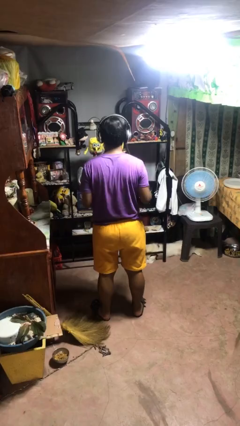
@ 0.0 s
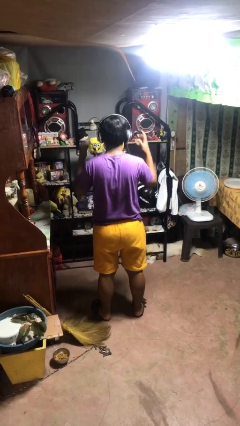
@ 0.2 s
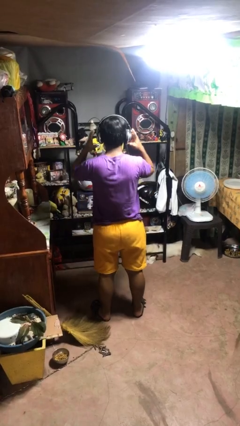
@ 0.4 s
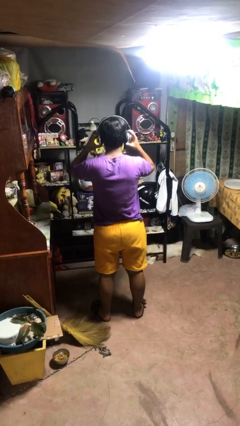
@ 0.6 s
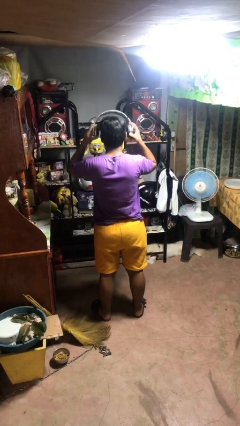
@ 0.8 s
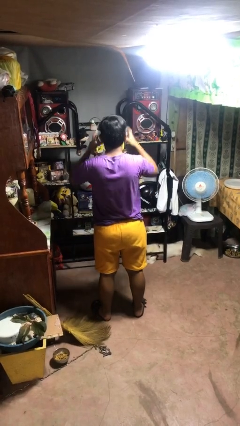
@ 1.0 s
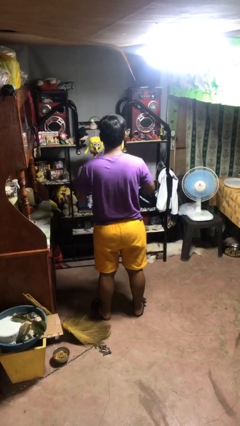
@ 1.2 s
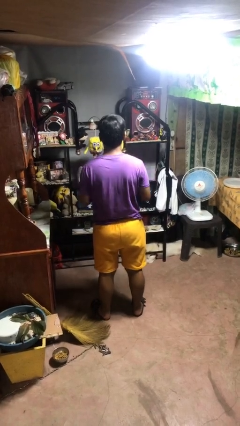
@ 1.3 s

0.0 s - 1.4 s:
person takes off headphones

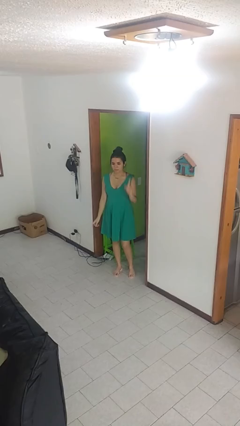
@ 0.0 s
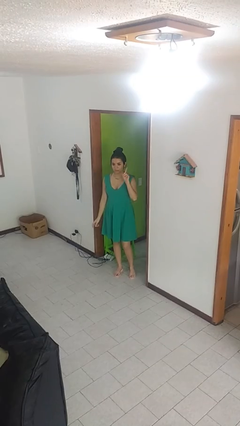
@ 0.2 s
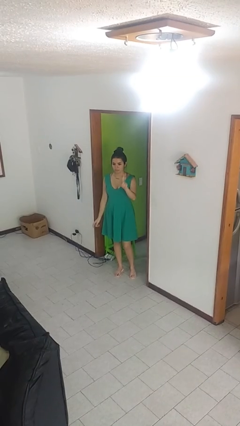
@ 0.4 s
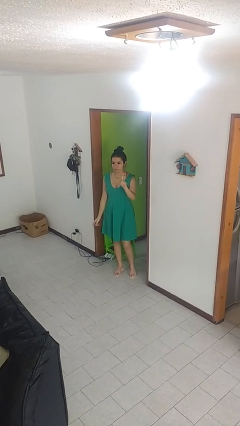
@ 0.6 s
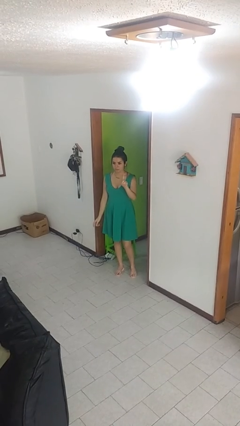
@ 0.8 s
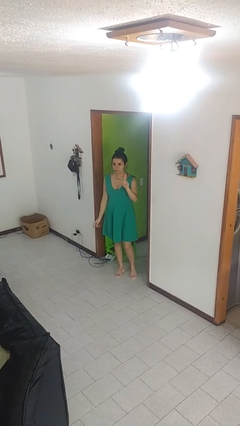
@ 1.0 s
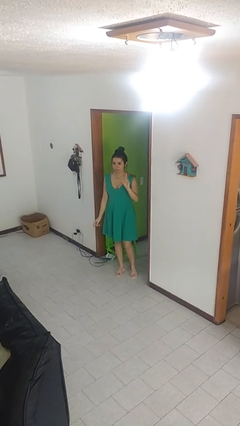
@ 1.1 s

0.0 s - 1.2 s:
person gestures number one

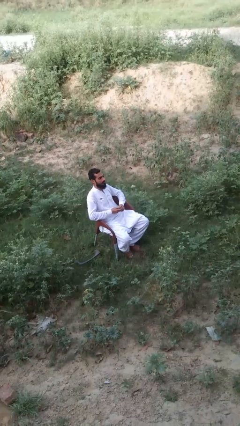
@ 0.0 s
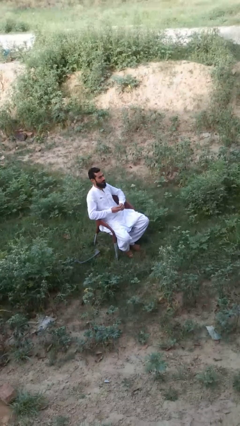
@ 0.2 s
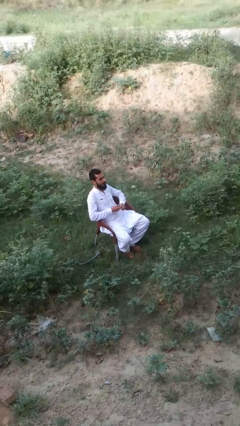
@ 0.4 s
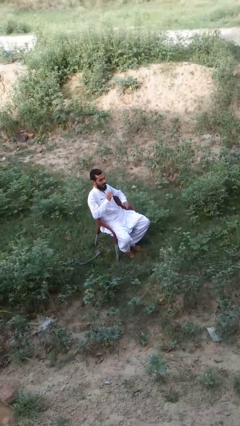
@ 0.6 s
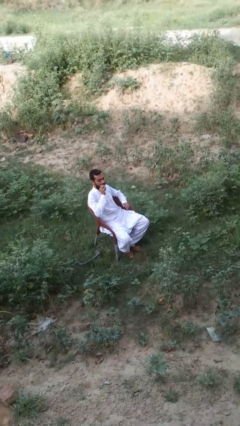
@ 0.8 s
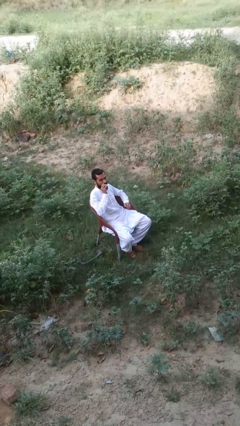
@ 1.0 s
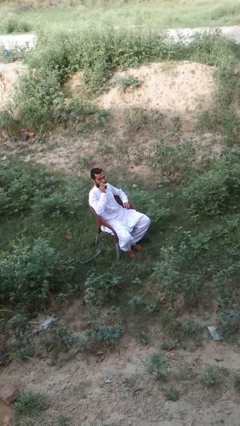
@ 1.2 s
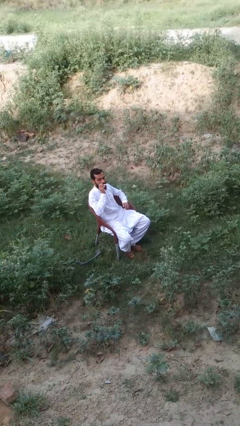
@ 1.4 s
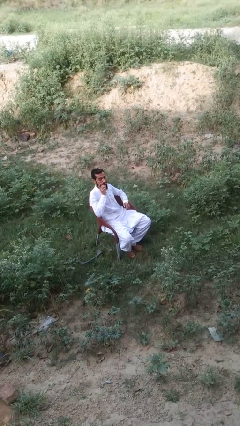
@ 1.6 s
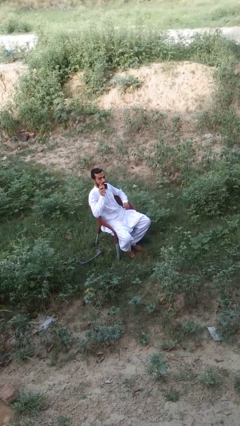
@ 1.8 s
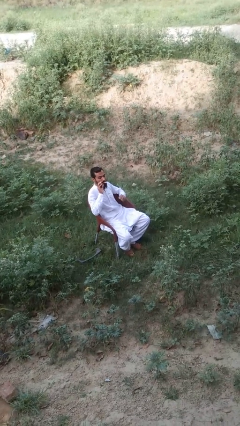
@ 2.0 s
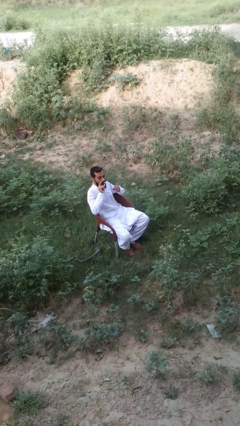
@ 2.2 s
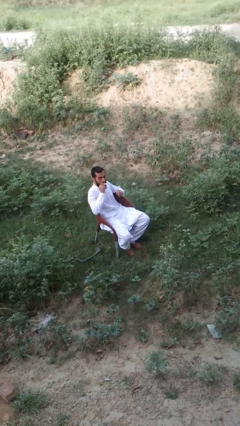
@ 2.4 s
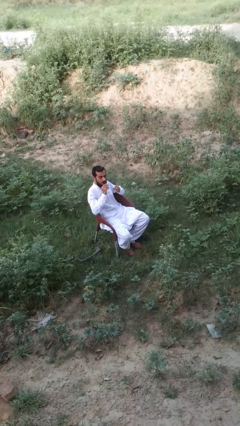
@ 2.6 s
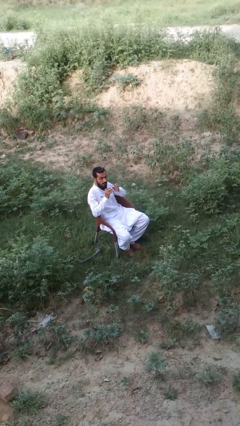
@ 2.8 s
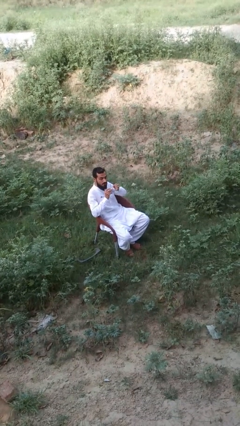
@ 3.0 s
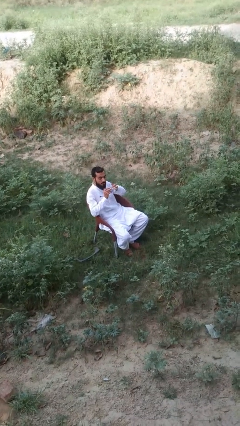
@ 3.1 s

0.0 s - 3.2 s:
person vapes

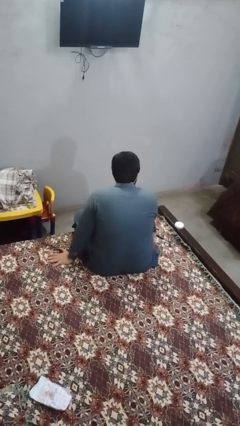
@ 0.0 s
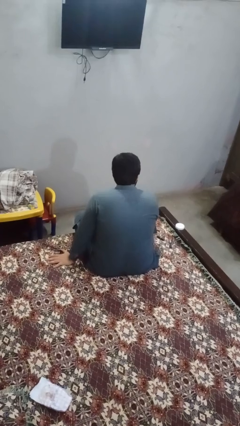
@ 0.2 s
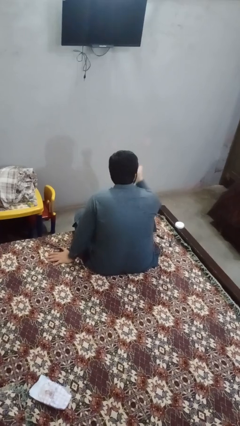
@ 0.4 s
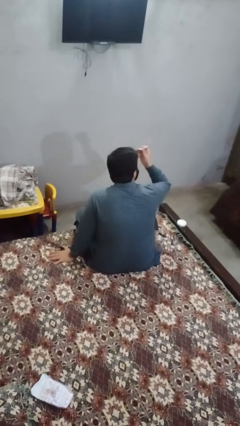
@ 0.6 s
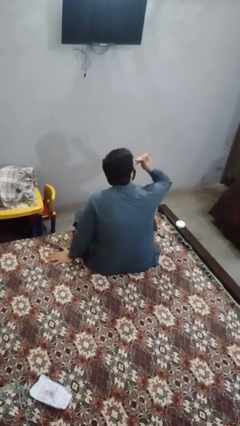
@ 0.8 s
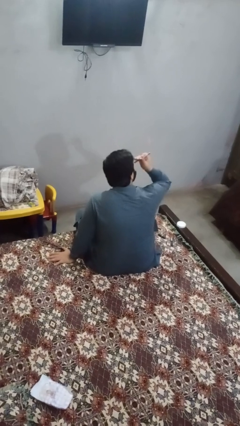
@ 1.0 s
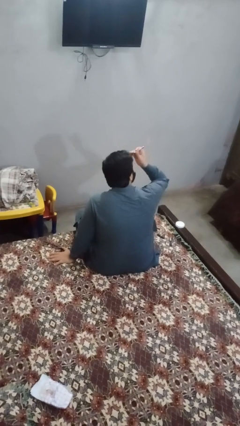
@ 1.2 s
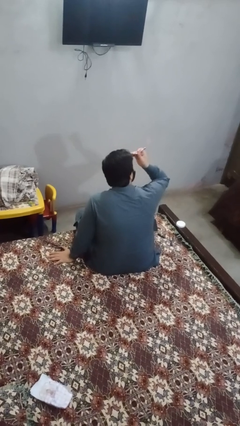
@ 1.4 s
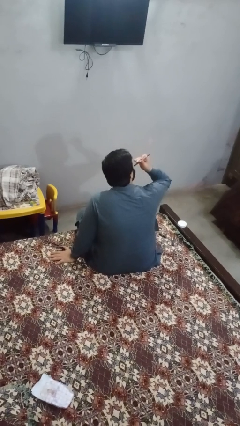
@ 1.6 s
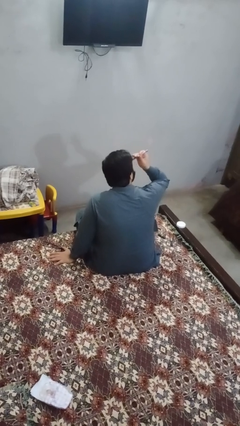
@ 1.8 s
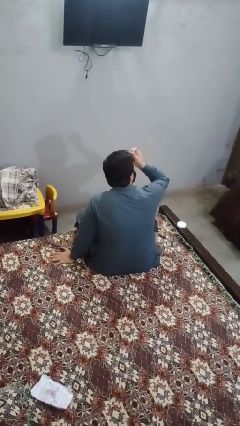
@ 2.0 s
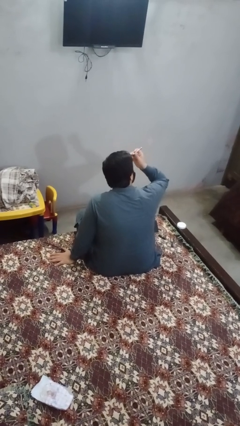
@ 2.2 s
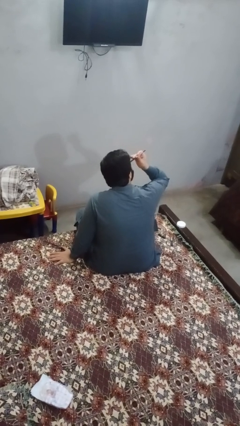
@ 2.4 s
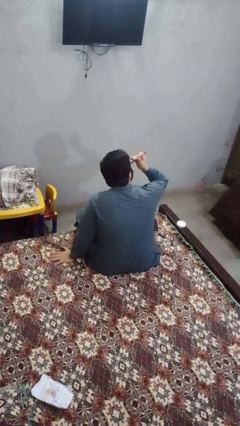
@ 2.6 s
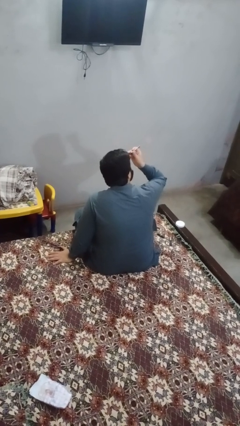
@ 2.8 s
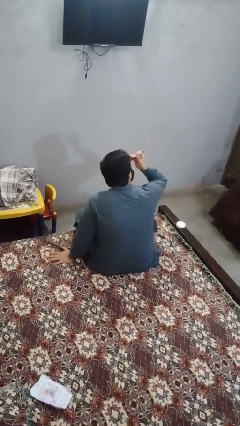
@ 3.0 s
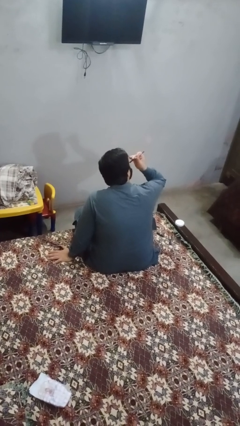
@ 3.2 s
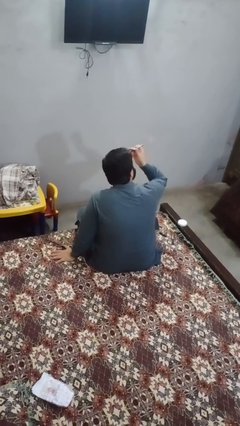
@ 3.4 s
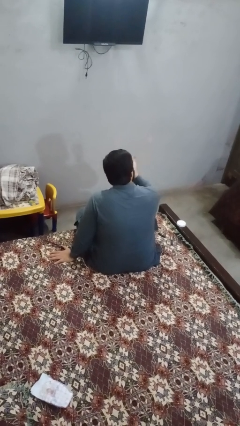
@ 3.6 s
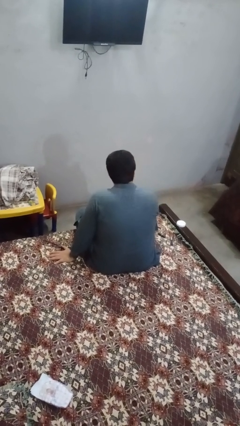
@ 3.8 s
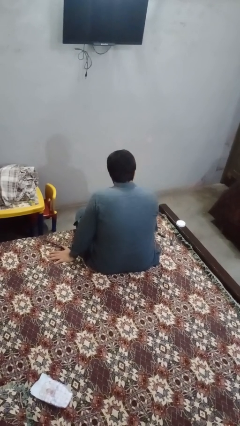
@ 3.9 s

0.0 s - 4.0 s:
person applies eye makeup

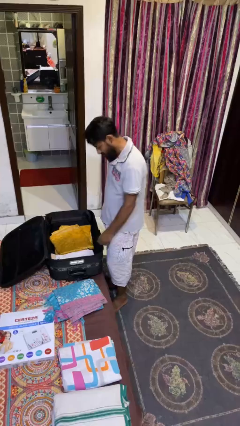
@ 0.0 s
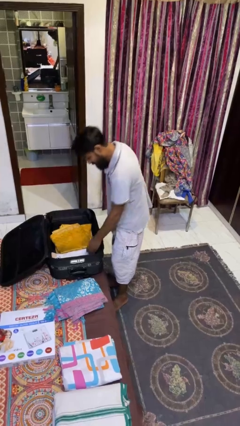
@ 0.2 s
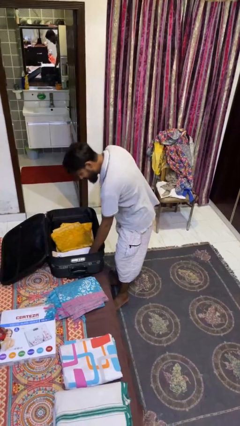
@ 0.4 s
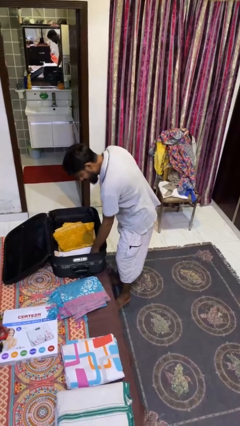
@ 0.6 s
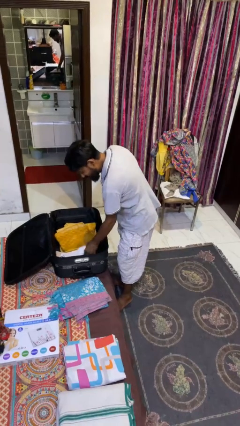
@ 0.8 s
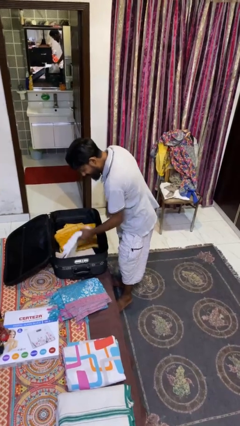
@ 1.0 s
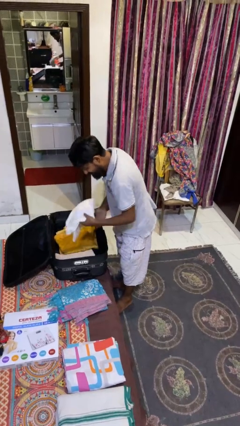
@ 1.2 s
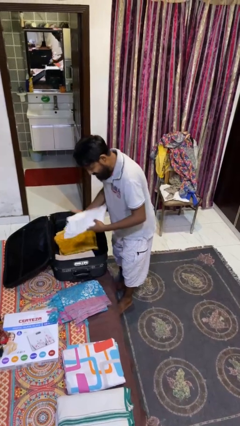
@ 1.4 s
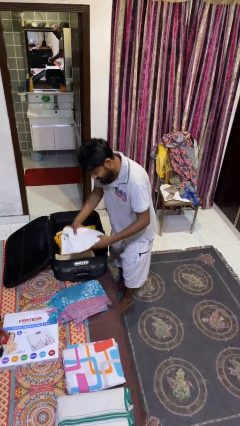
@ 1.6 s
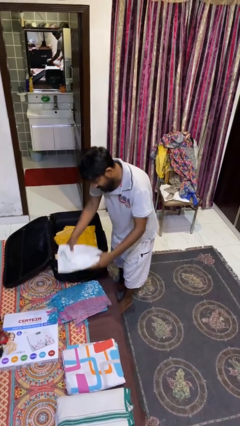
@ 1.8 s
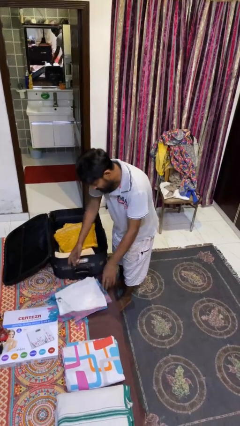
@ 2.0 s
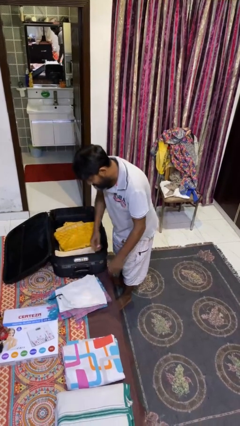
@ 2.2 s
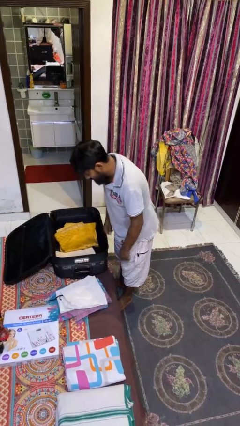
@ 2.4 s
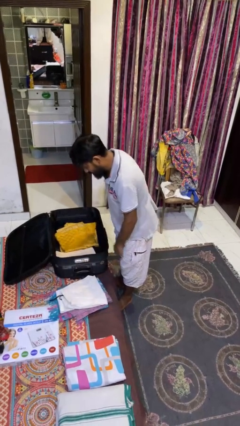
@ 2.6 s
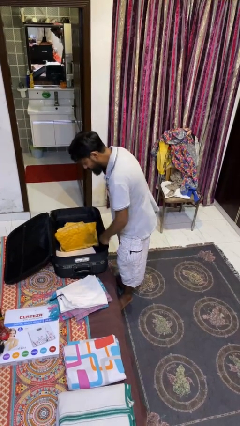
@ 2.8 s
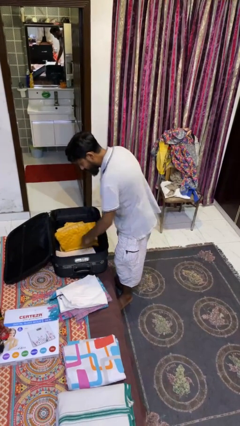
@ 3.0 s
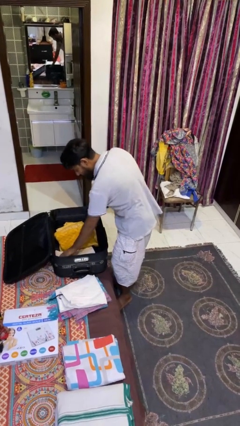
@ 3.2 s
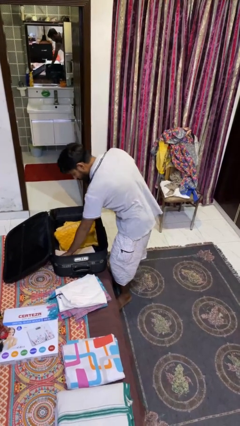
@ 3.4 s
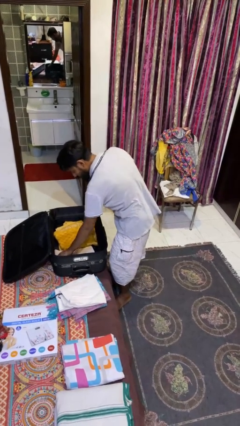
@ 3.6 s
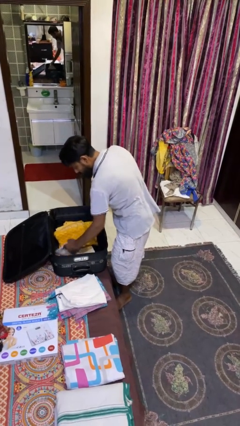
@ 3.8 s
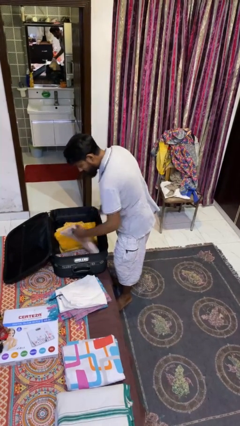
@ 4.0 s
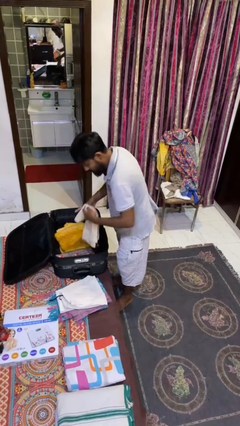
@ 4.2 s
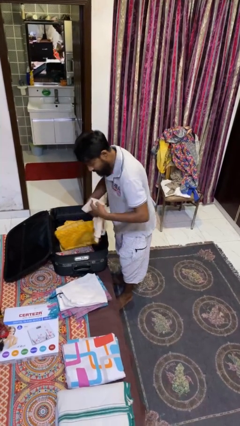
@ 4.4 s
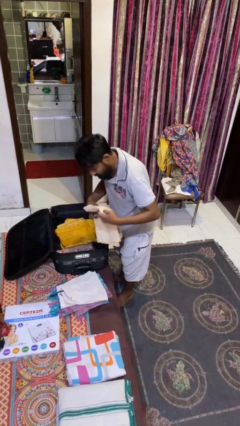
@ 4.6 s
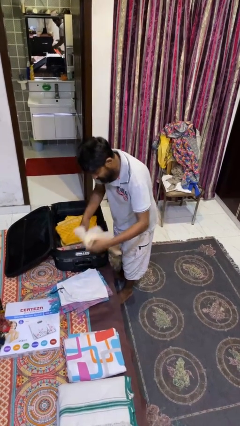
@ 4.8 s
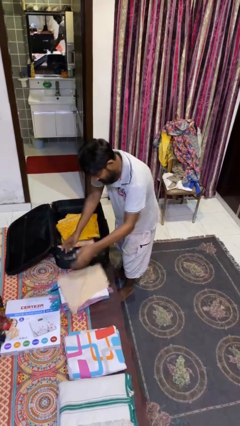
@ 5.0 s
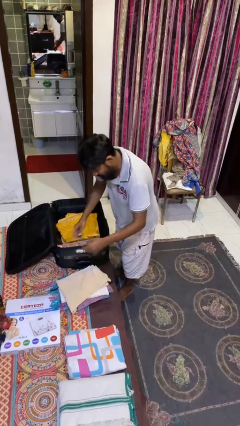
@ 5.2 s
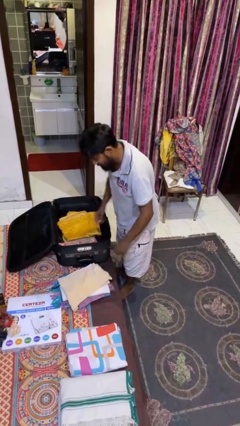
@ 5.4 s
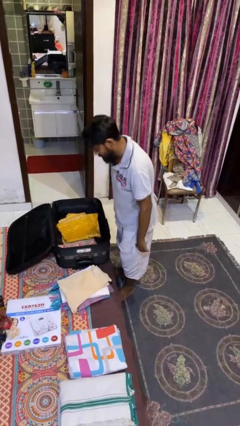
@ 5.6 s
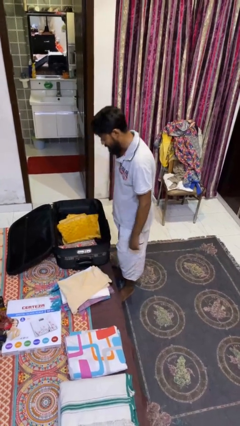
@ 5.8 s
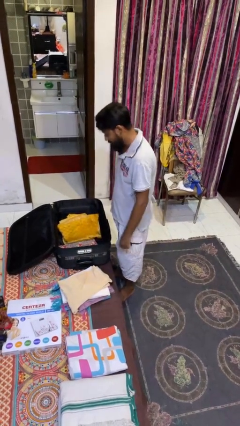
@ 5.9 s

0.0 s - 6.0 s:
person unloads clothes from suitcase

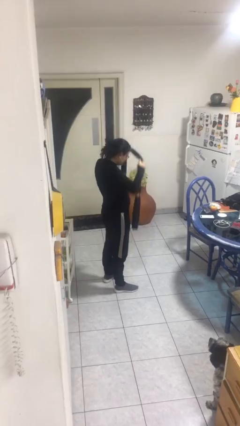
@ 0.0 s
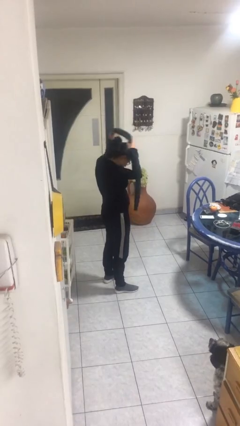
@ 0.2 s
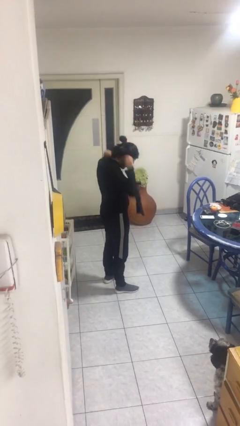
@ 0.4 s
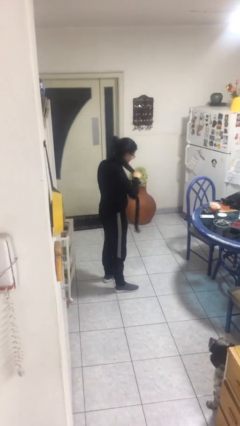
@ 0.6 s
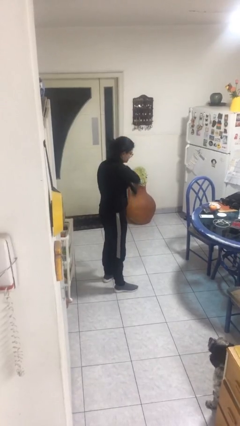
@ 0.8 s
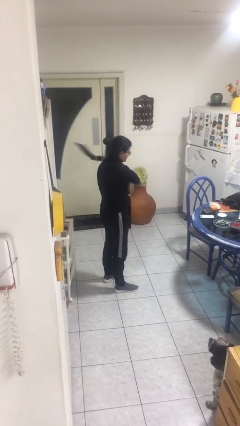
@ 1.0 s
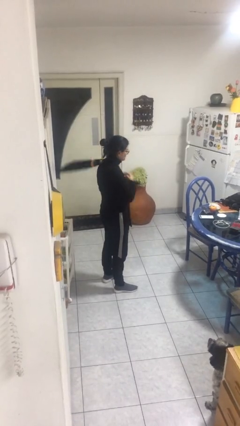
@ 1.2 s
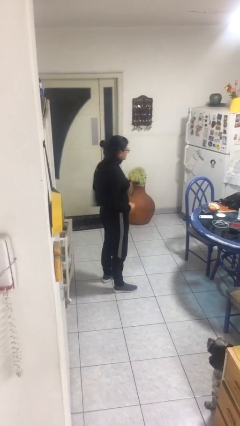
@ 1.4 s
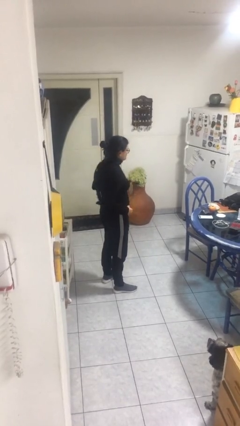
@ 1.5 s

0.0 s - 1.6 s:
person puts on scarf
